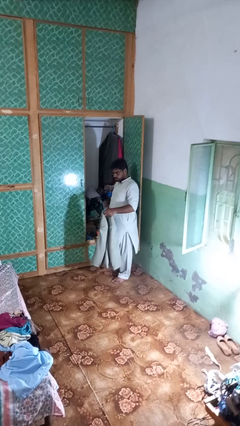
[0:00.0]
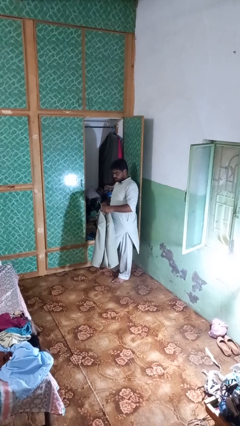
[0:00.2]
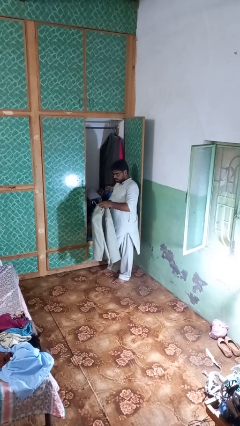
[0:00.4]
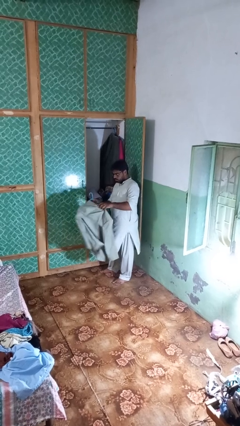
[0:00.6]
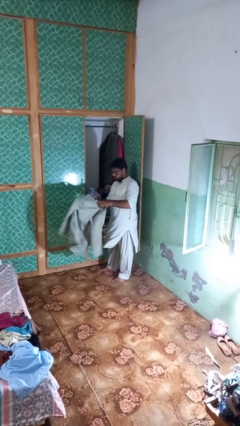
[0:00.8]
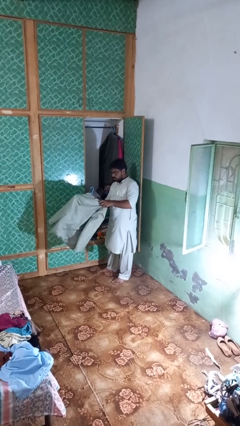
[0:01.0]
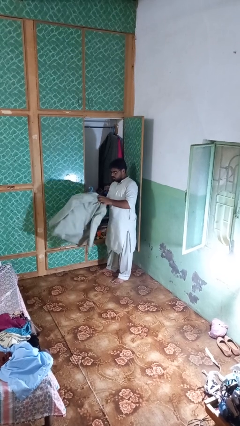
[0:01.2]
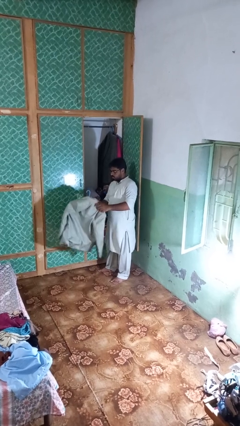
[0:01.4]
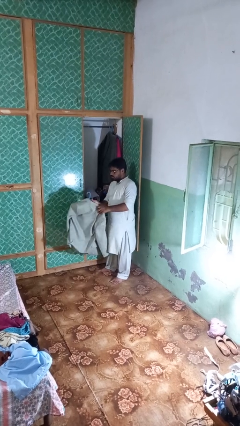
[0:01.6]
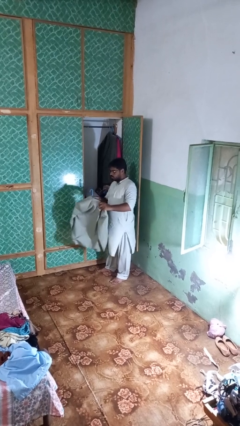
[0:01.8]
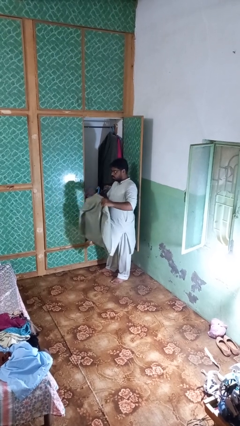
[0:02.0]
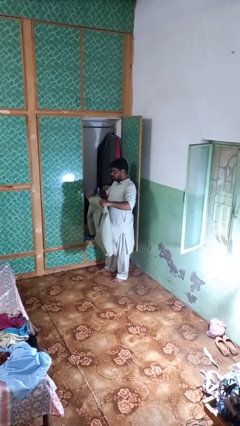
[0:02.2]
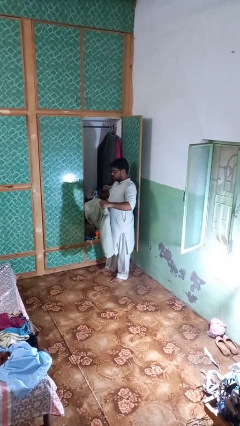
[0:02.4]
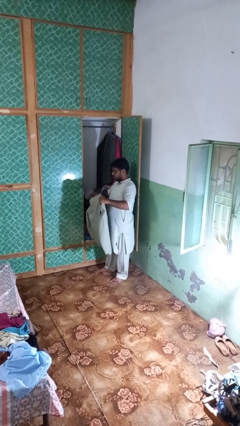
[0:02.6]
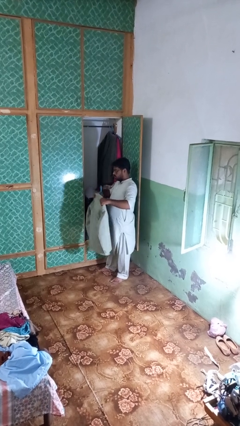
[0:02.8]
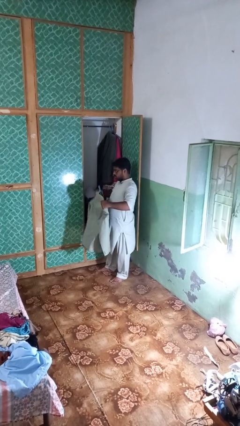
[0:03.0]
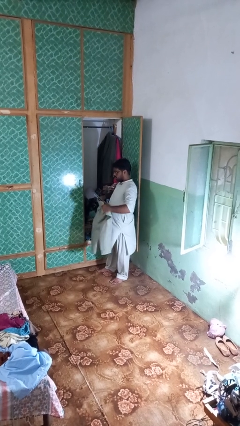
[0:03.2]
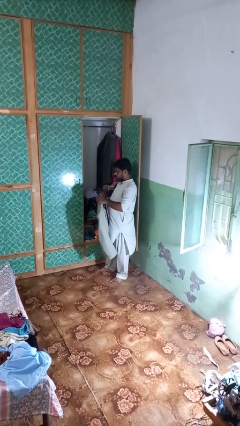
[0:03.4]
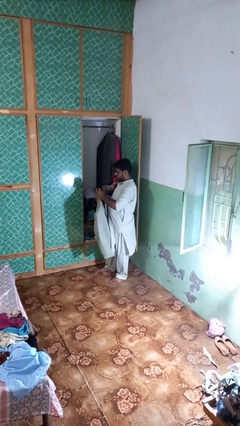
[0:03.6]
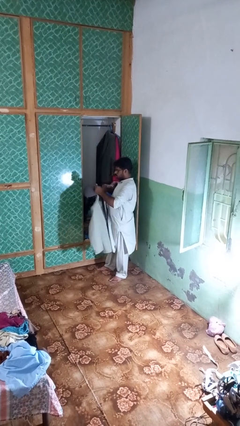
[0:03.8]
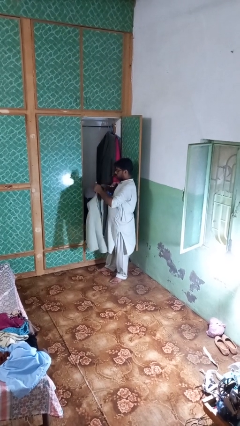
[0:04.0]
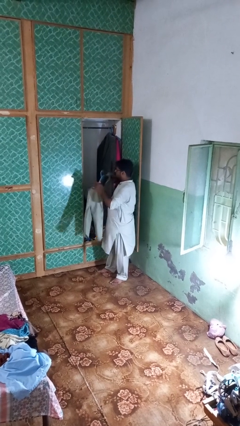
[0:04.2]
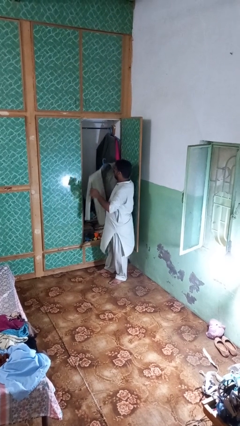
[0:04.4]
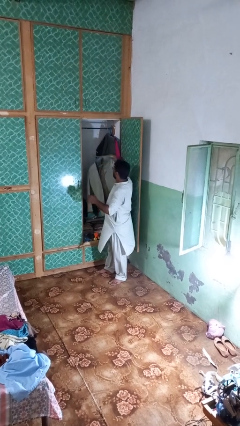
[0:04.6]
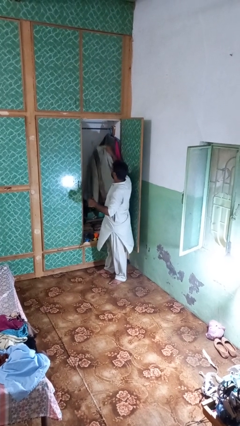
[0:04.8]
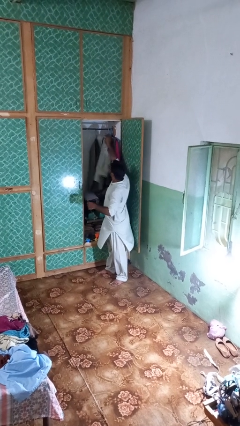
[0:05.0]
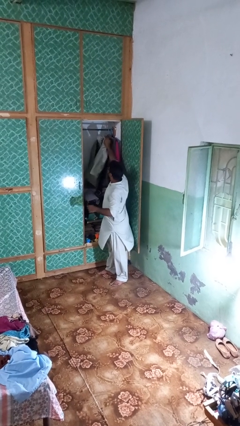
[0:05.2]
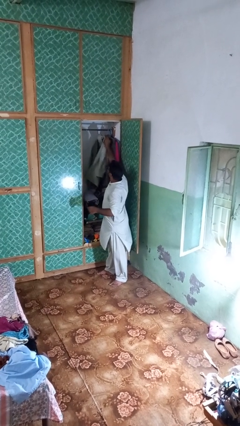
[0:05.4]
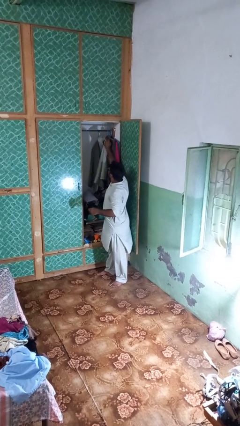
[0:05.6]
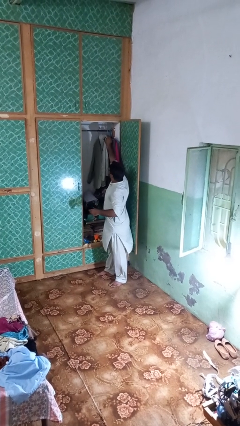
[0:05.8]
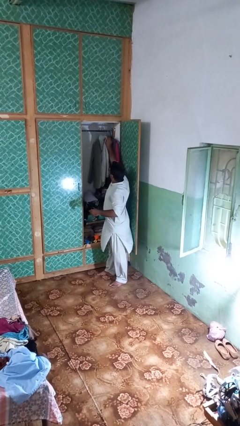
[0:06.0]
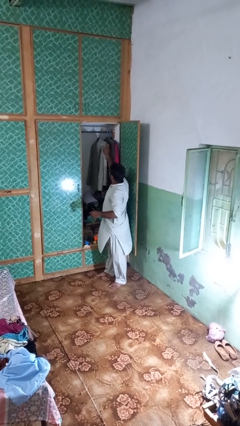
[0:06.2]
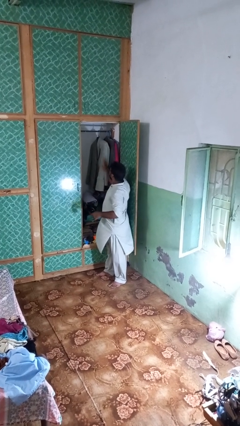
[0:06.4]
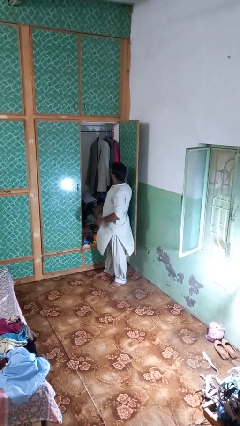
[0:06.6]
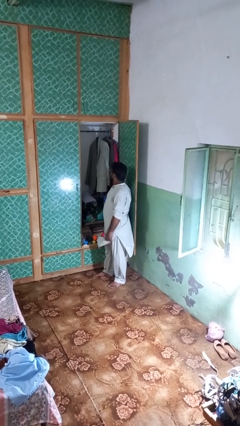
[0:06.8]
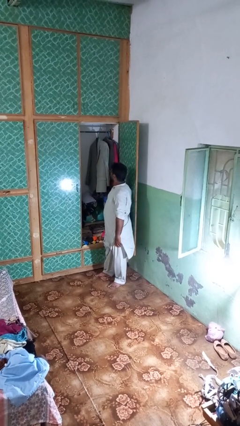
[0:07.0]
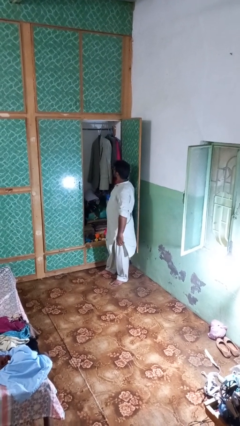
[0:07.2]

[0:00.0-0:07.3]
person puts clothes into closet

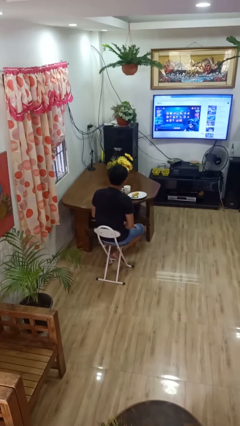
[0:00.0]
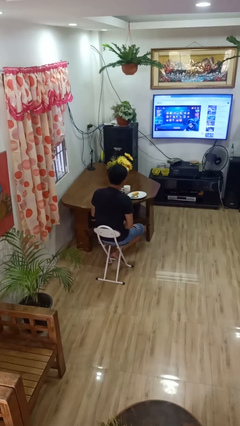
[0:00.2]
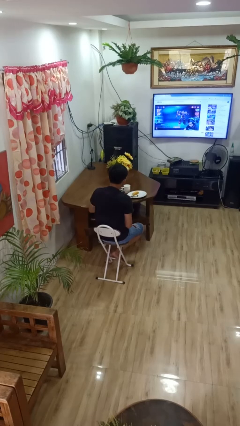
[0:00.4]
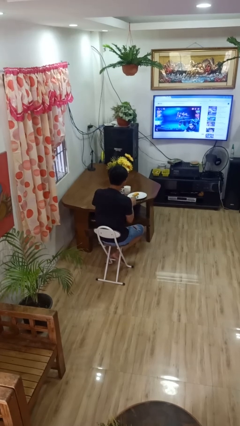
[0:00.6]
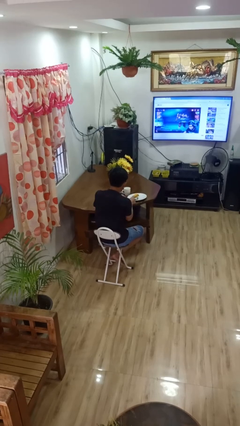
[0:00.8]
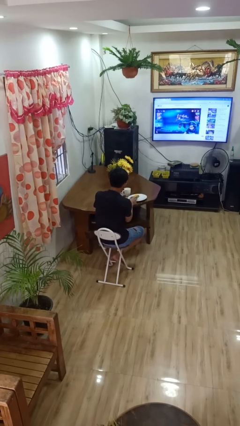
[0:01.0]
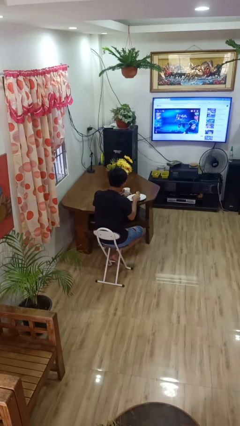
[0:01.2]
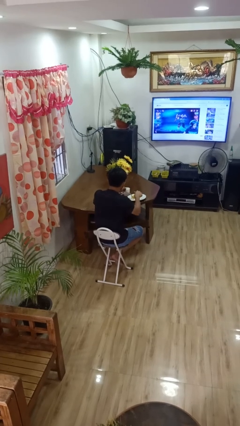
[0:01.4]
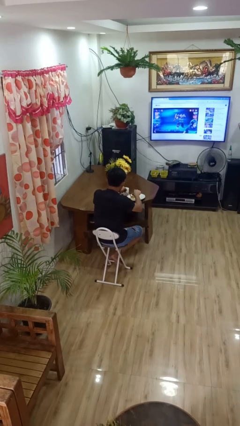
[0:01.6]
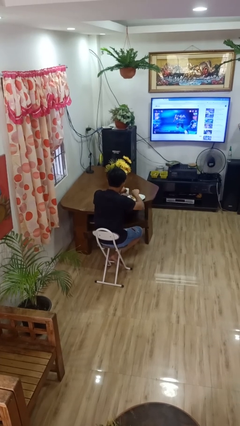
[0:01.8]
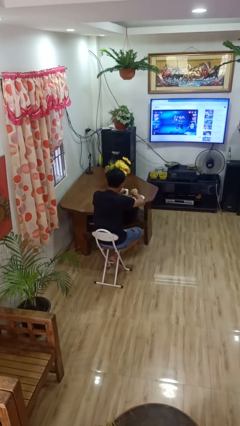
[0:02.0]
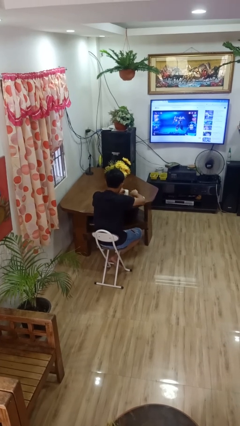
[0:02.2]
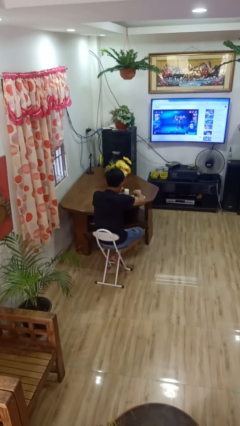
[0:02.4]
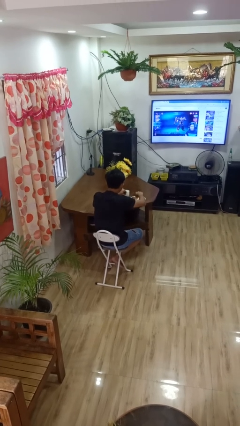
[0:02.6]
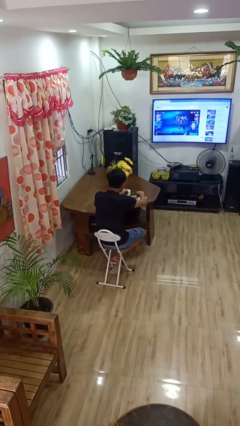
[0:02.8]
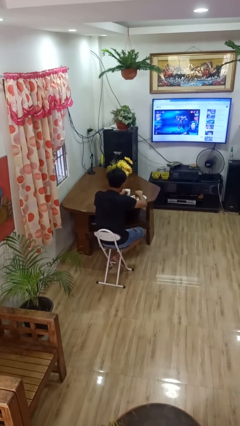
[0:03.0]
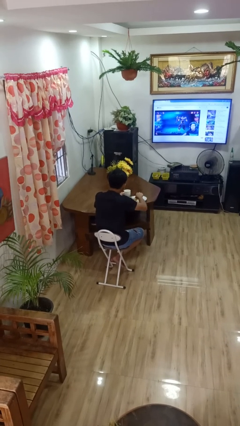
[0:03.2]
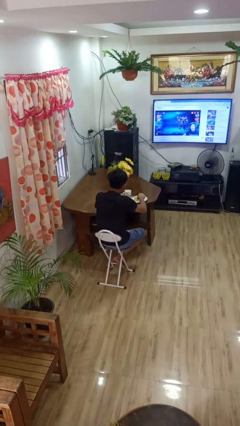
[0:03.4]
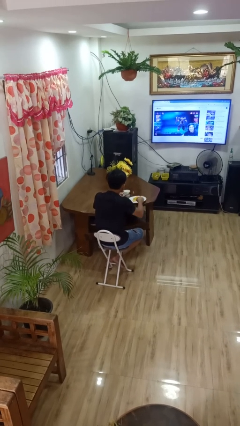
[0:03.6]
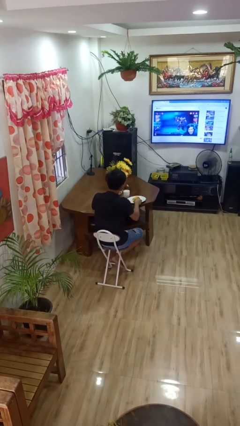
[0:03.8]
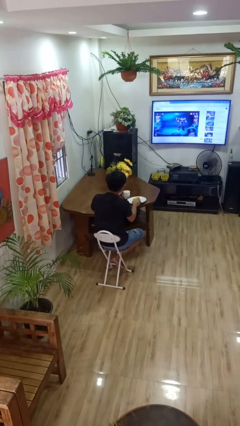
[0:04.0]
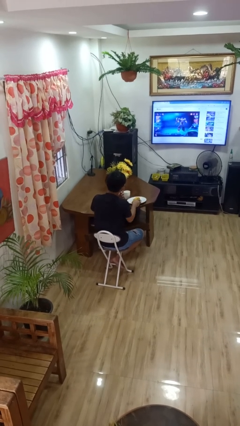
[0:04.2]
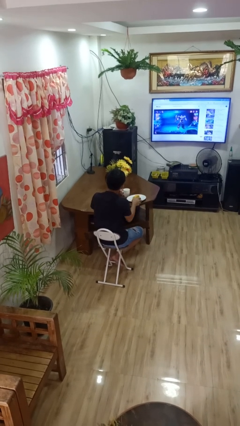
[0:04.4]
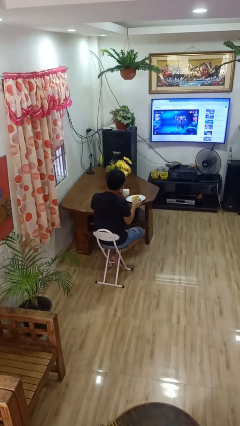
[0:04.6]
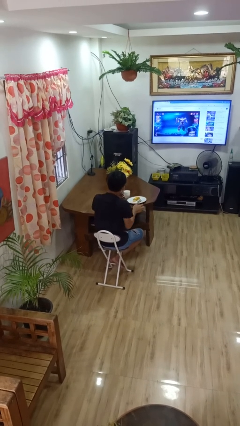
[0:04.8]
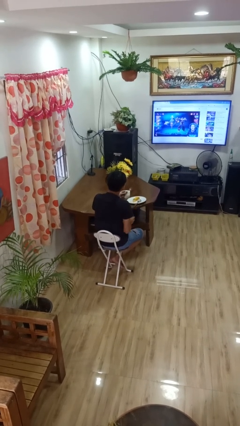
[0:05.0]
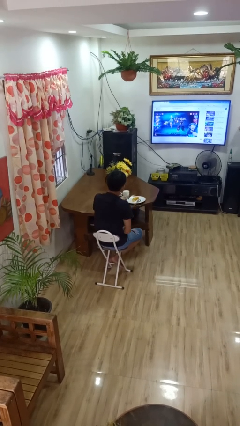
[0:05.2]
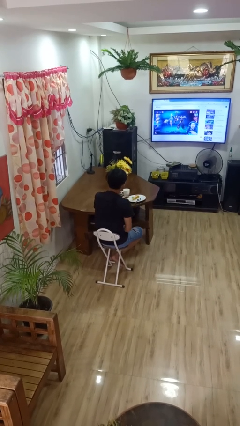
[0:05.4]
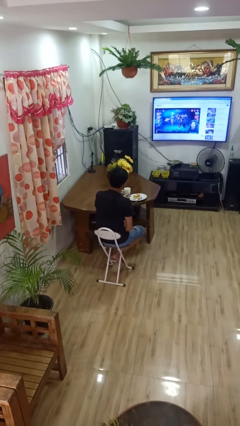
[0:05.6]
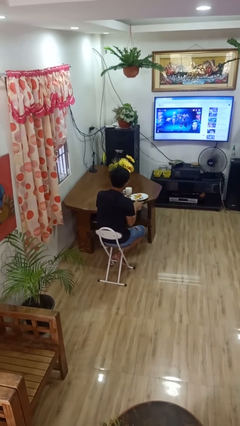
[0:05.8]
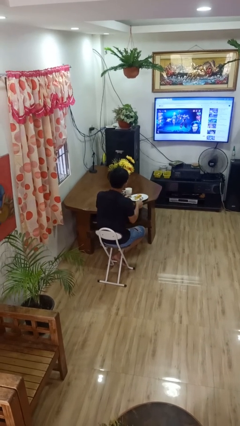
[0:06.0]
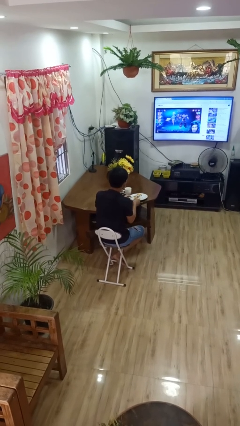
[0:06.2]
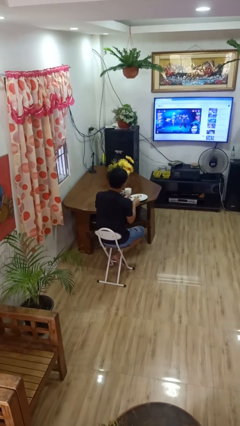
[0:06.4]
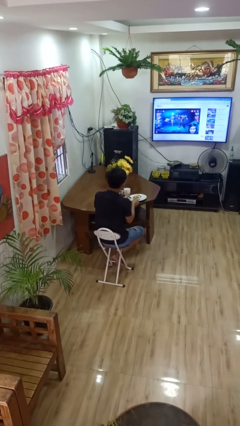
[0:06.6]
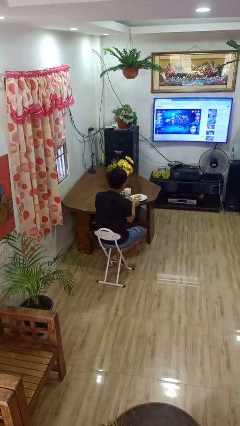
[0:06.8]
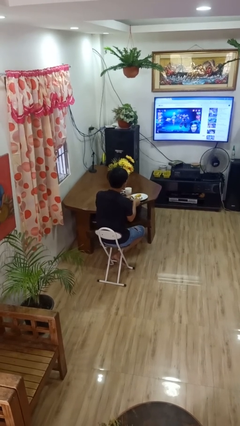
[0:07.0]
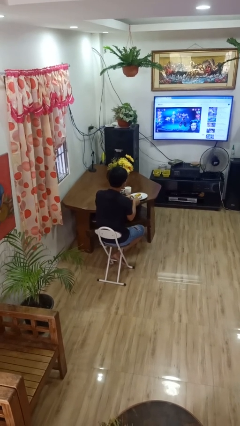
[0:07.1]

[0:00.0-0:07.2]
person eats with utensil

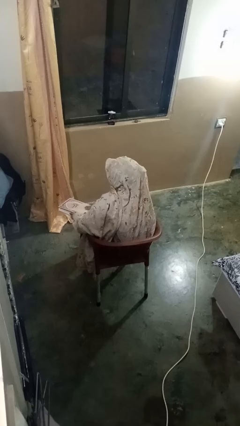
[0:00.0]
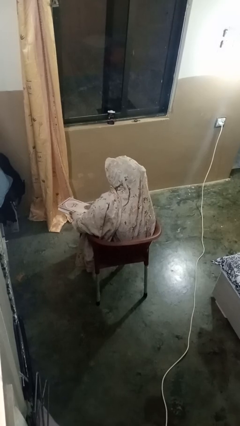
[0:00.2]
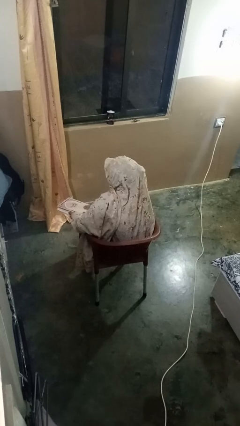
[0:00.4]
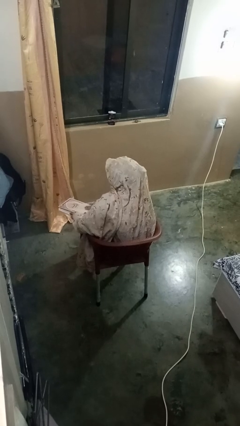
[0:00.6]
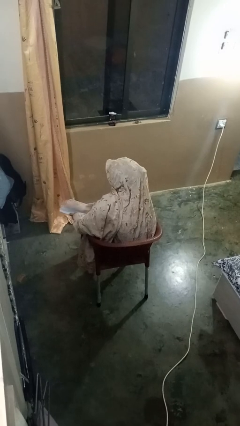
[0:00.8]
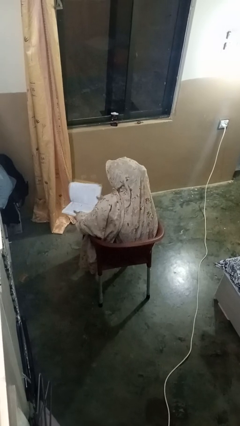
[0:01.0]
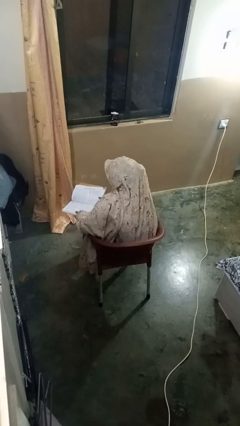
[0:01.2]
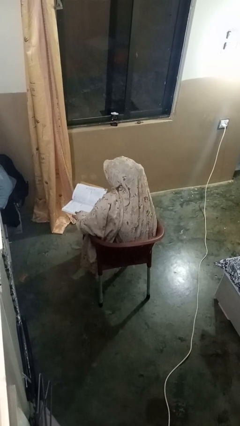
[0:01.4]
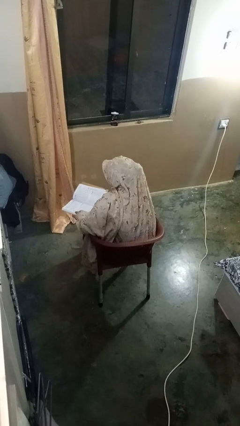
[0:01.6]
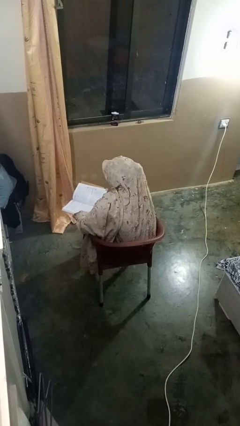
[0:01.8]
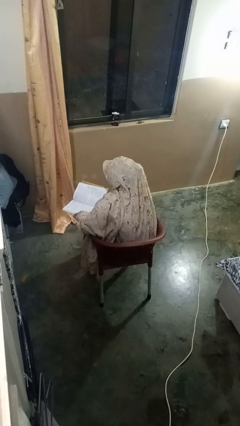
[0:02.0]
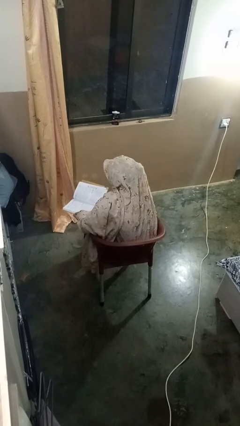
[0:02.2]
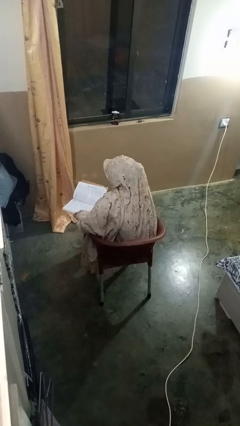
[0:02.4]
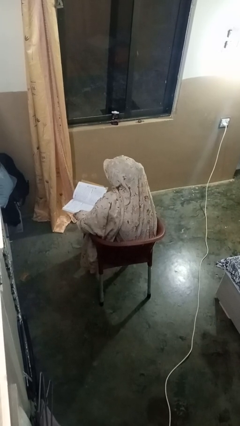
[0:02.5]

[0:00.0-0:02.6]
person reads book

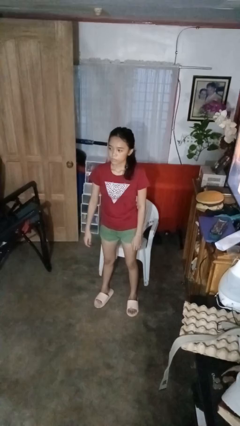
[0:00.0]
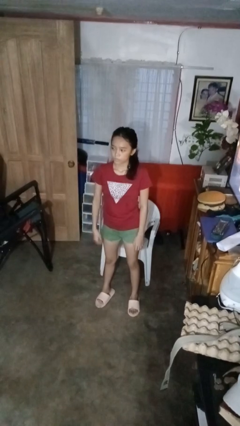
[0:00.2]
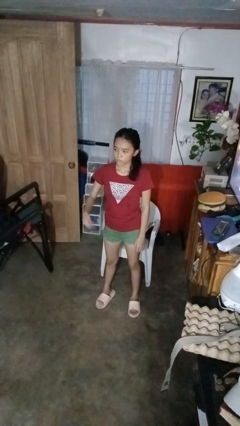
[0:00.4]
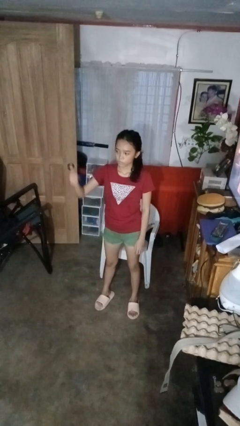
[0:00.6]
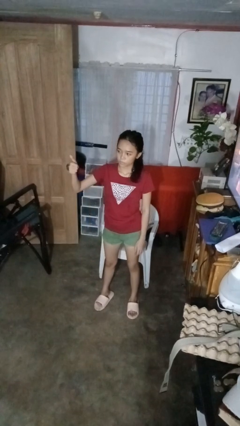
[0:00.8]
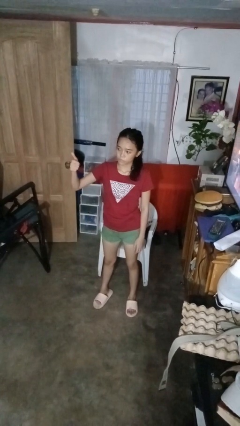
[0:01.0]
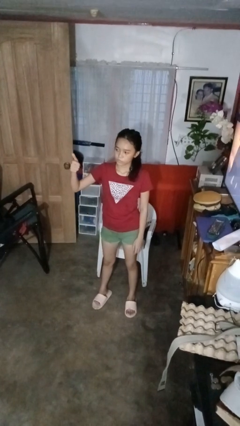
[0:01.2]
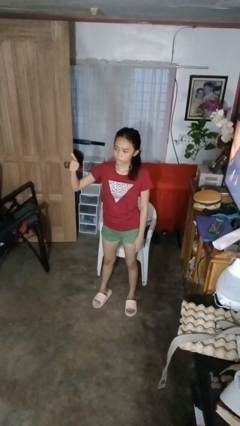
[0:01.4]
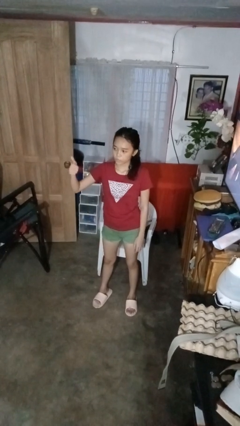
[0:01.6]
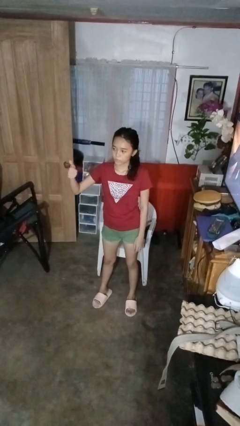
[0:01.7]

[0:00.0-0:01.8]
person gestures thumbs up
